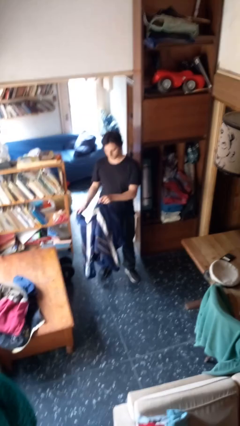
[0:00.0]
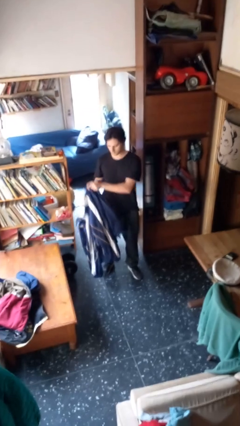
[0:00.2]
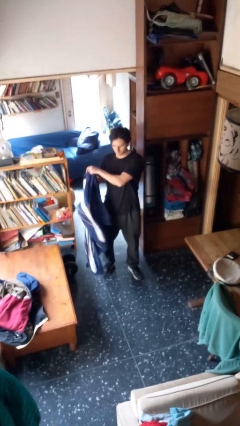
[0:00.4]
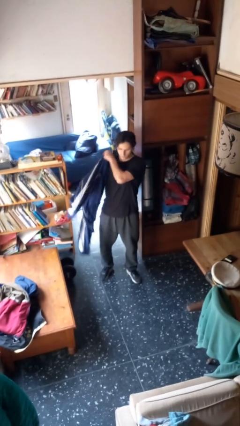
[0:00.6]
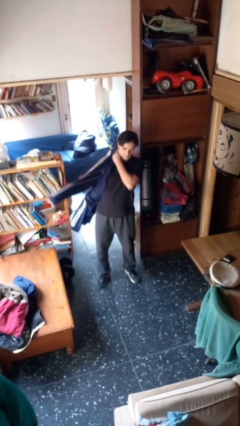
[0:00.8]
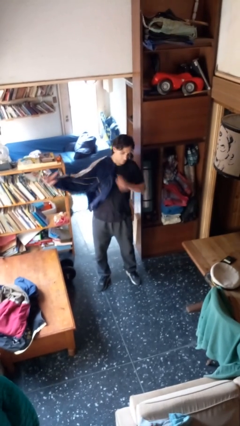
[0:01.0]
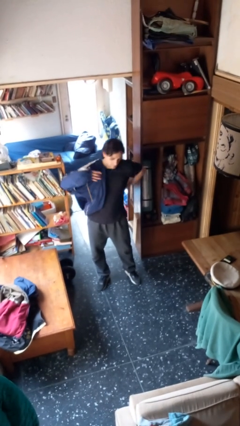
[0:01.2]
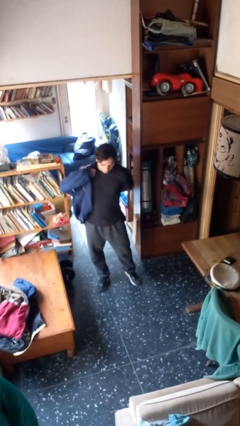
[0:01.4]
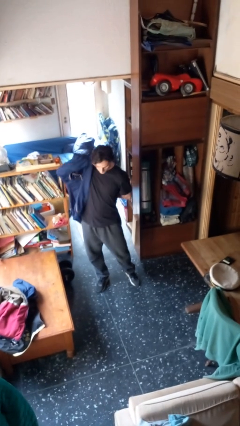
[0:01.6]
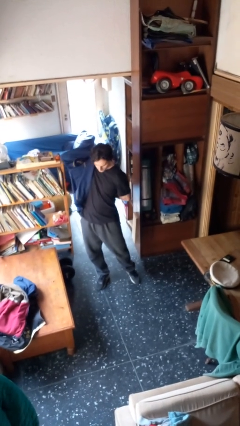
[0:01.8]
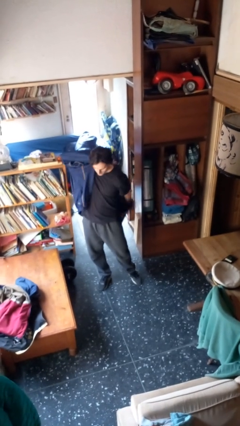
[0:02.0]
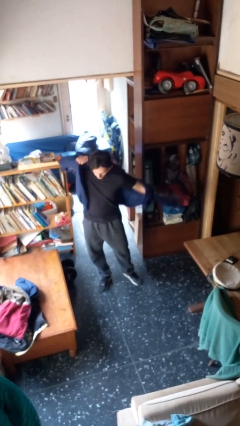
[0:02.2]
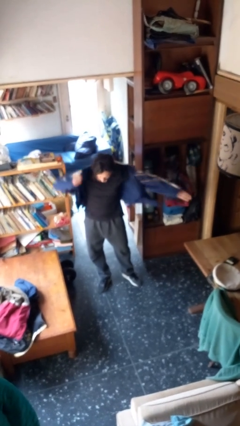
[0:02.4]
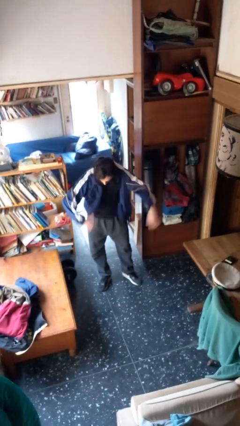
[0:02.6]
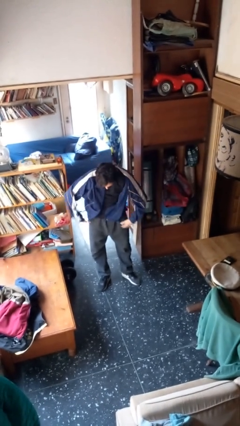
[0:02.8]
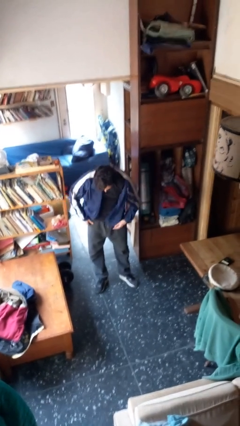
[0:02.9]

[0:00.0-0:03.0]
person puts on jacket

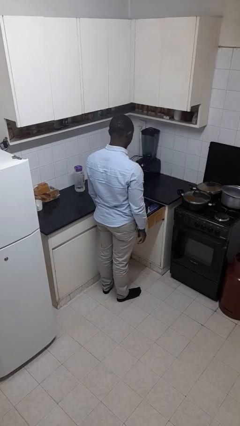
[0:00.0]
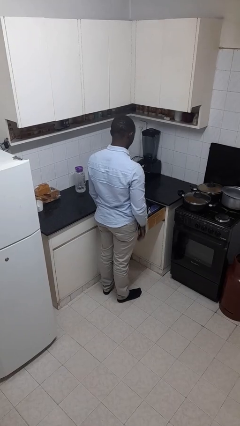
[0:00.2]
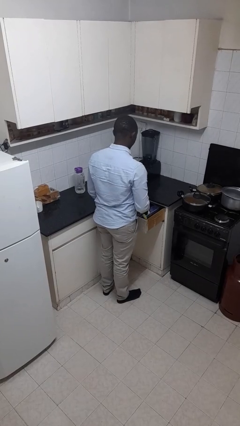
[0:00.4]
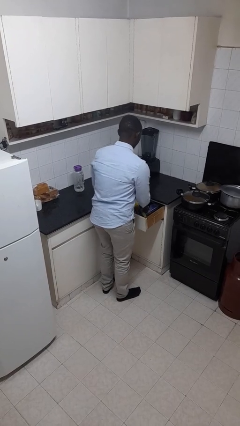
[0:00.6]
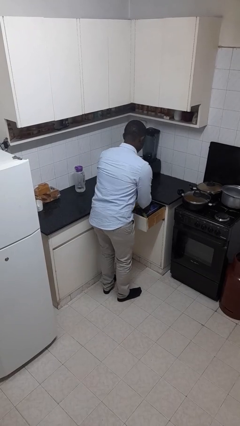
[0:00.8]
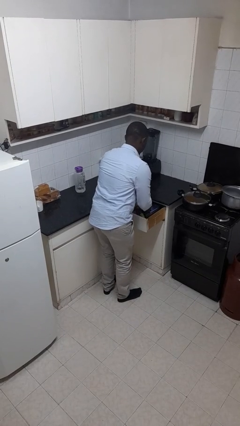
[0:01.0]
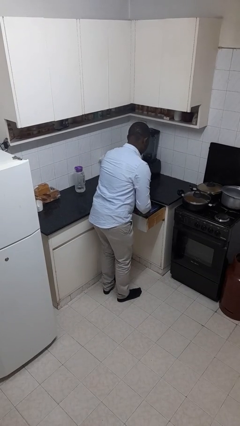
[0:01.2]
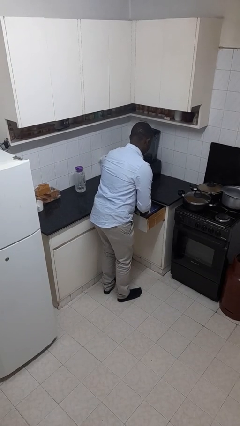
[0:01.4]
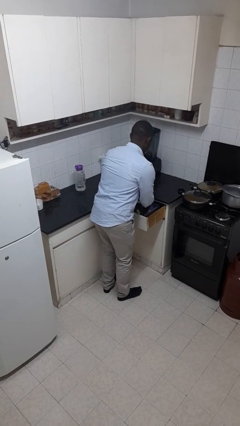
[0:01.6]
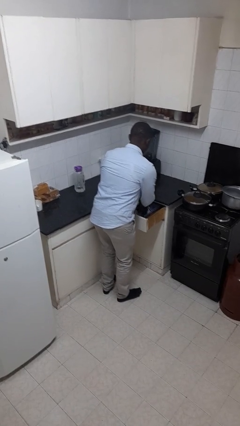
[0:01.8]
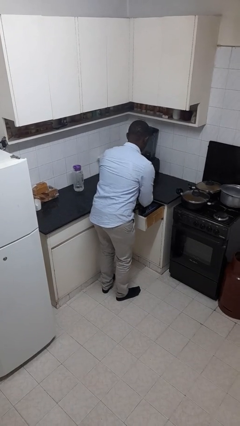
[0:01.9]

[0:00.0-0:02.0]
person searches in kitchen drawer

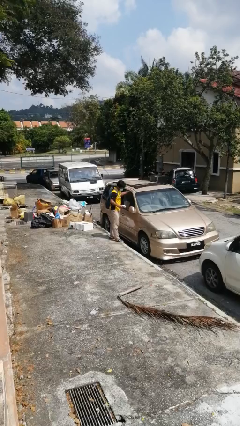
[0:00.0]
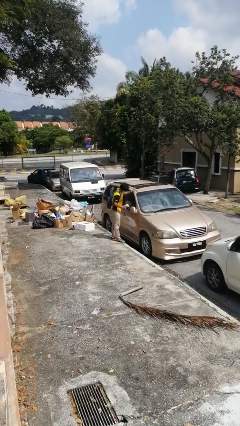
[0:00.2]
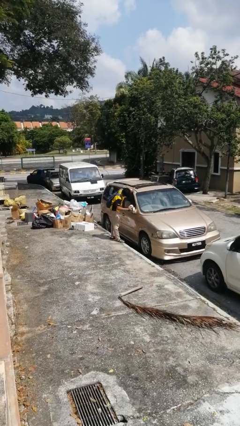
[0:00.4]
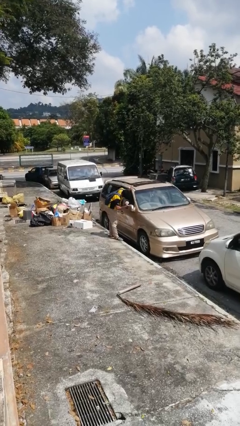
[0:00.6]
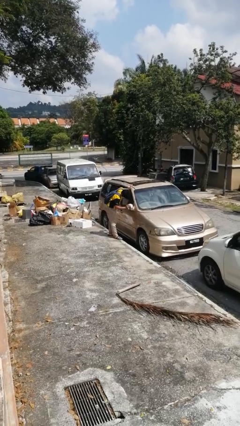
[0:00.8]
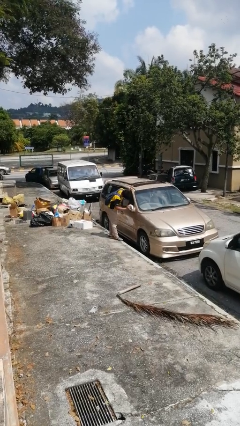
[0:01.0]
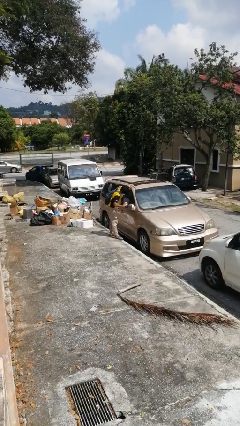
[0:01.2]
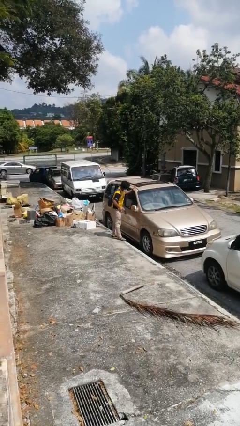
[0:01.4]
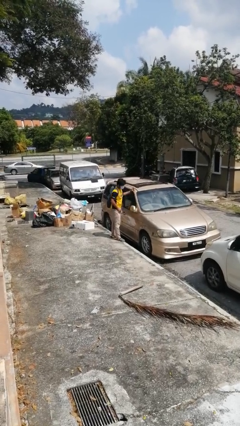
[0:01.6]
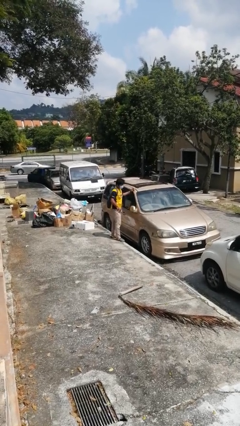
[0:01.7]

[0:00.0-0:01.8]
person polishes car with rag

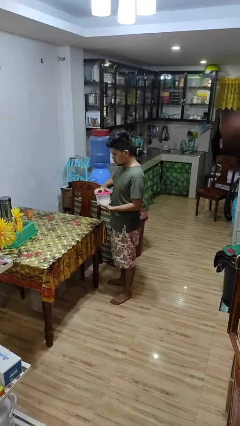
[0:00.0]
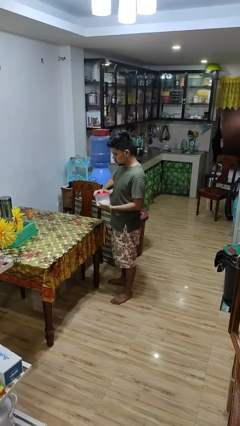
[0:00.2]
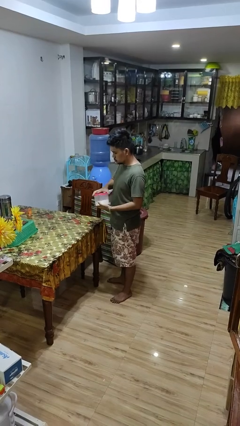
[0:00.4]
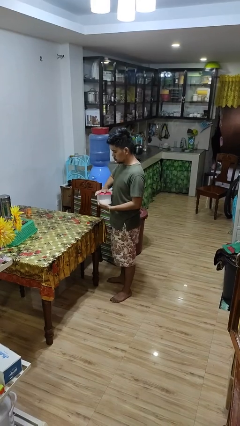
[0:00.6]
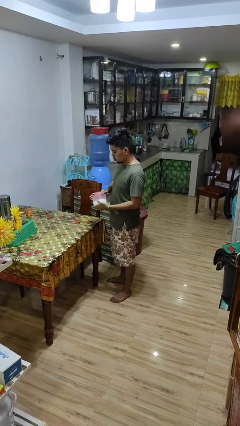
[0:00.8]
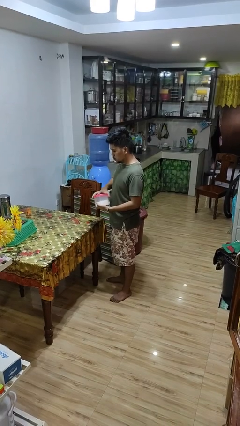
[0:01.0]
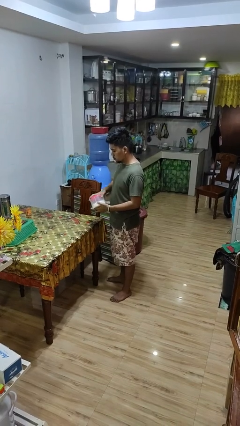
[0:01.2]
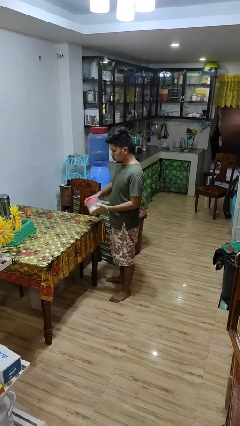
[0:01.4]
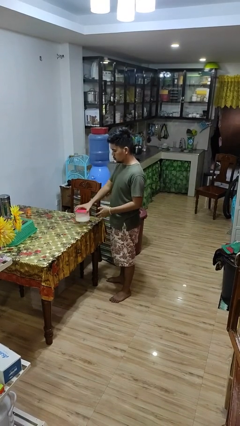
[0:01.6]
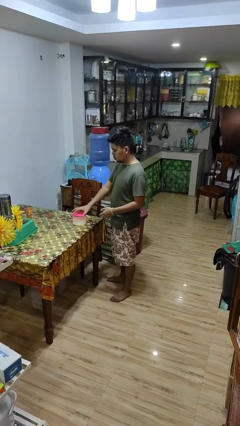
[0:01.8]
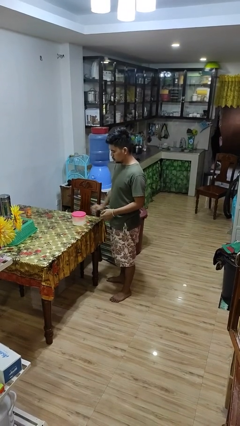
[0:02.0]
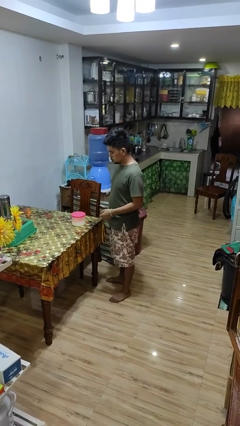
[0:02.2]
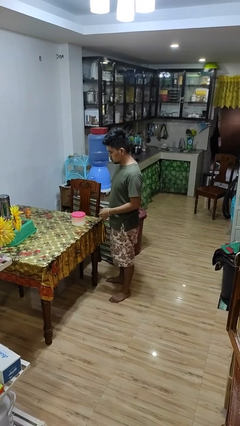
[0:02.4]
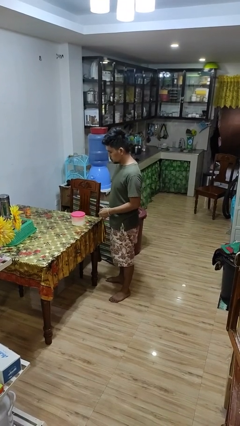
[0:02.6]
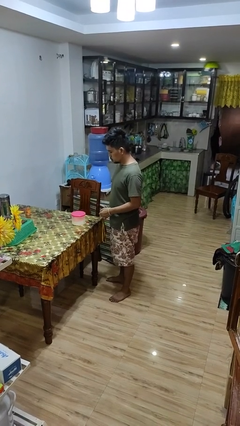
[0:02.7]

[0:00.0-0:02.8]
person closes jar

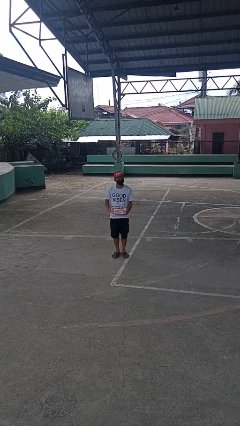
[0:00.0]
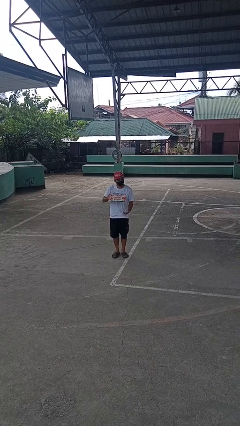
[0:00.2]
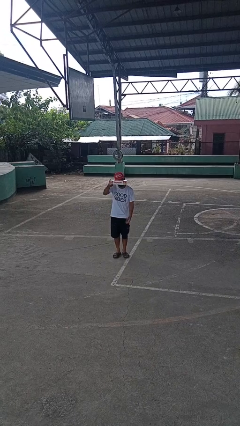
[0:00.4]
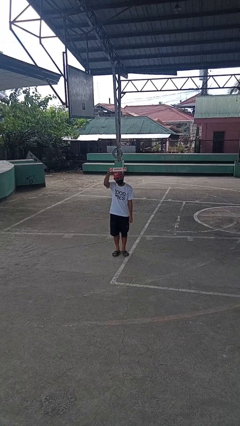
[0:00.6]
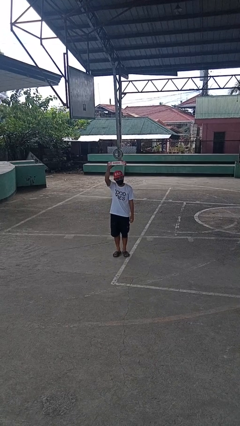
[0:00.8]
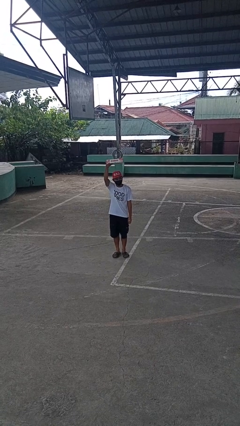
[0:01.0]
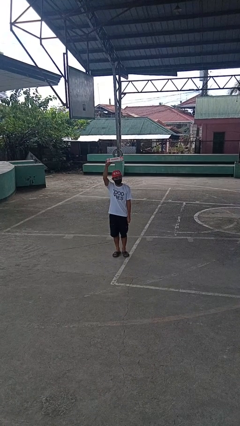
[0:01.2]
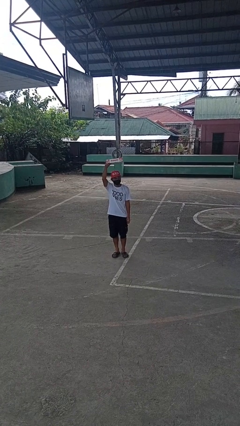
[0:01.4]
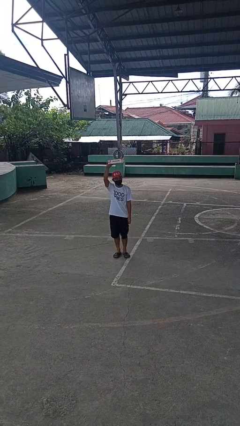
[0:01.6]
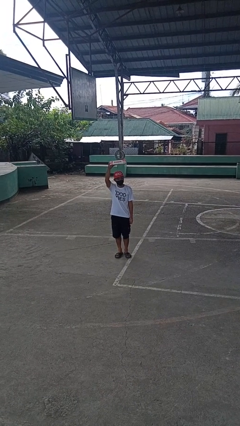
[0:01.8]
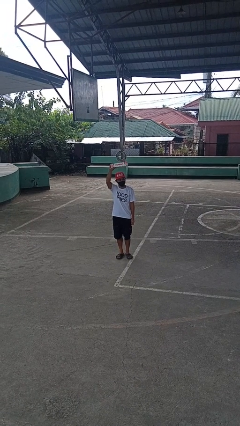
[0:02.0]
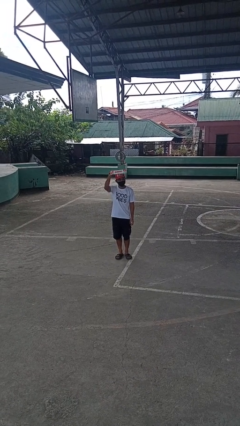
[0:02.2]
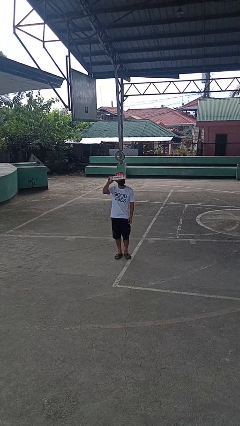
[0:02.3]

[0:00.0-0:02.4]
person holds object above head

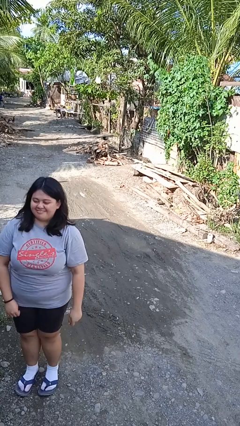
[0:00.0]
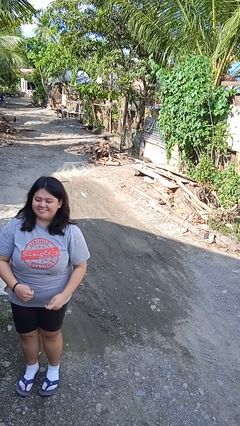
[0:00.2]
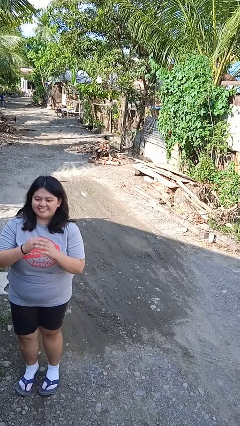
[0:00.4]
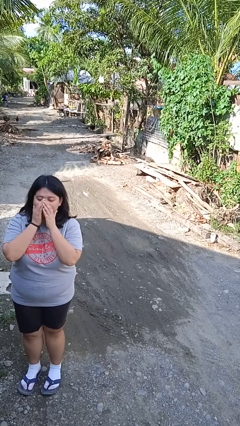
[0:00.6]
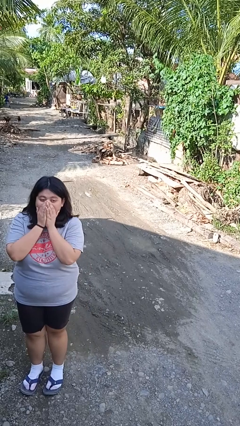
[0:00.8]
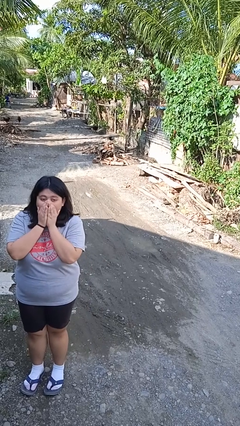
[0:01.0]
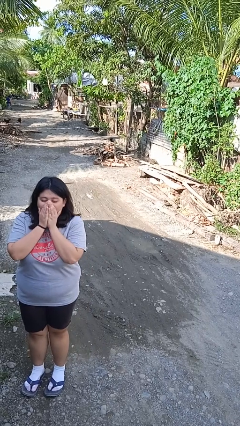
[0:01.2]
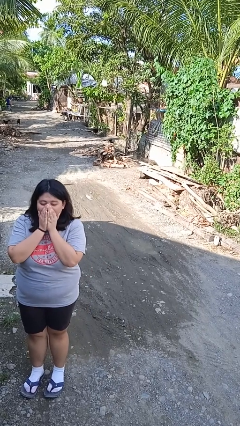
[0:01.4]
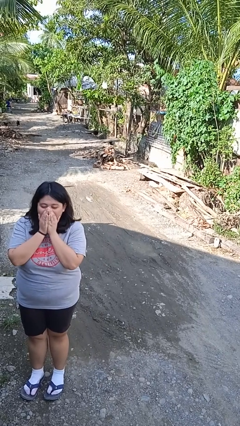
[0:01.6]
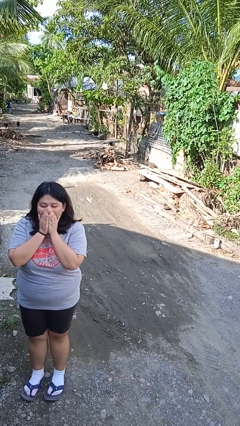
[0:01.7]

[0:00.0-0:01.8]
person blows into hands

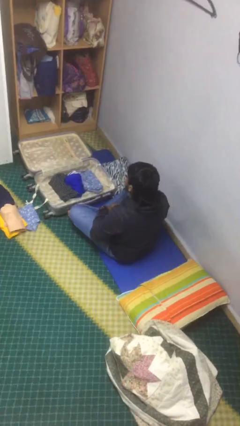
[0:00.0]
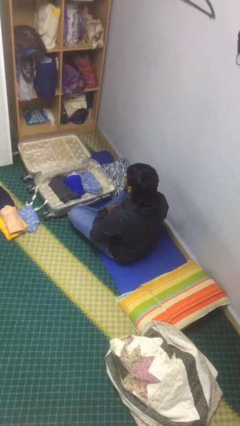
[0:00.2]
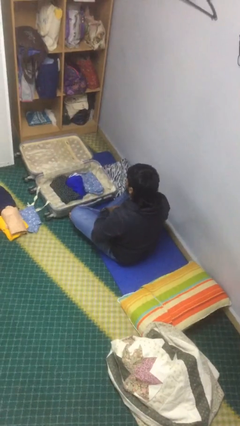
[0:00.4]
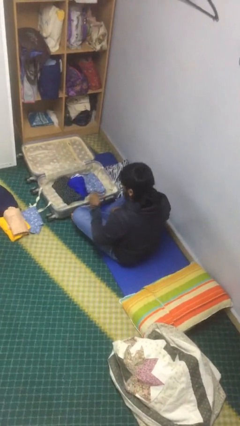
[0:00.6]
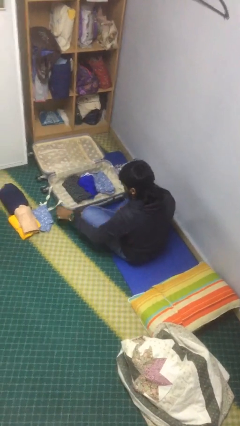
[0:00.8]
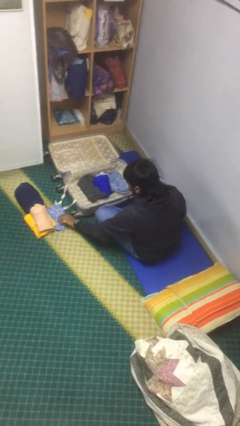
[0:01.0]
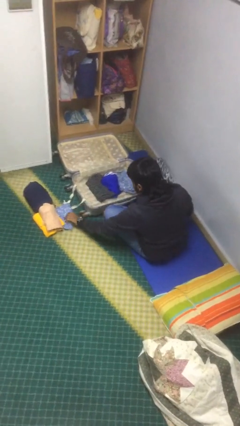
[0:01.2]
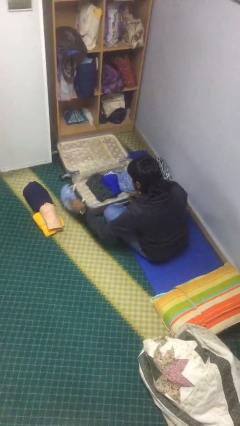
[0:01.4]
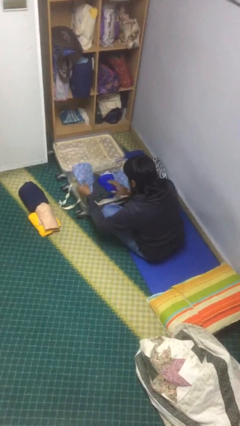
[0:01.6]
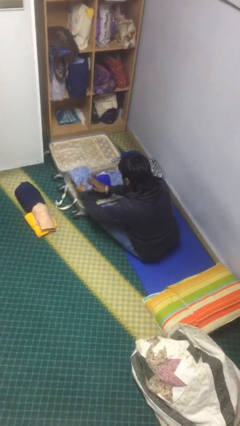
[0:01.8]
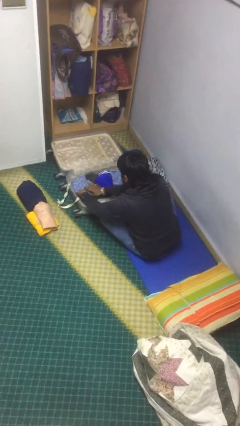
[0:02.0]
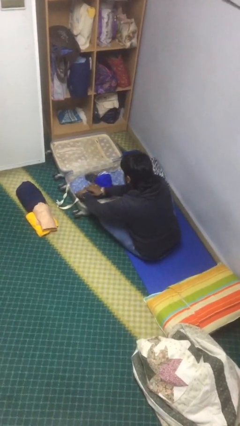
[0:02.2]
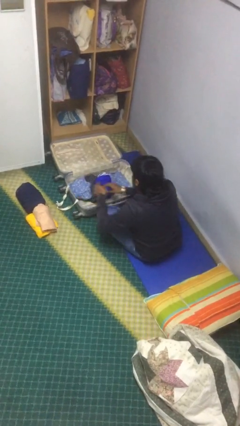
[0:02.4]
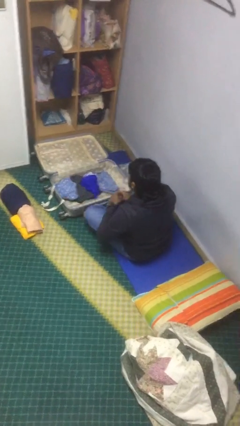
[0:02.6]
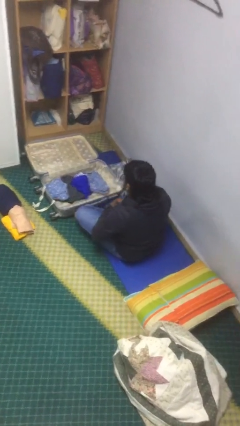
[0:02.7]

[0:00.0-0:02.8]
person loads clothes into suitcase

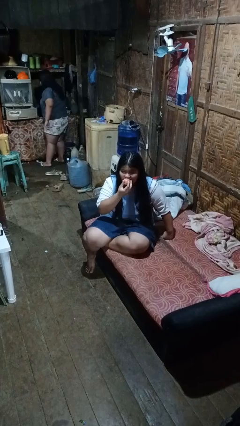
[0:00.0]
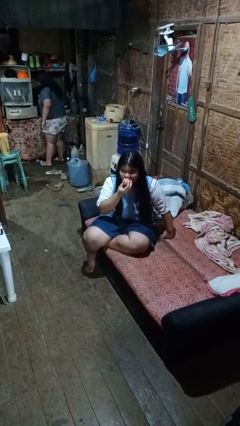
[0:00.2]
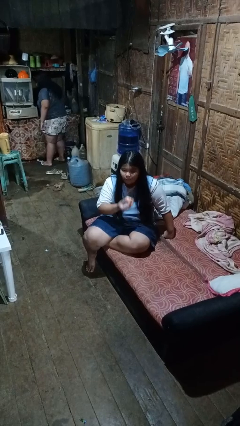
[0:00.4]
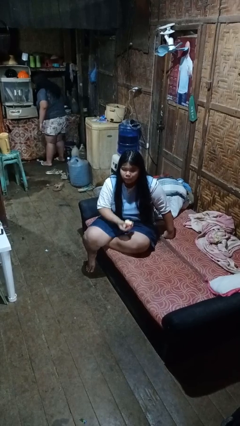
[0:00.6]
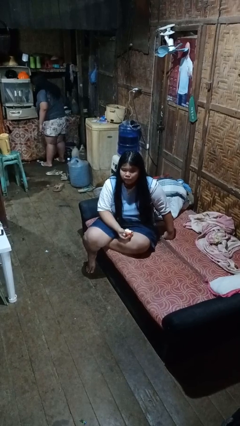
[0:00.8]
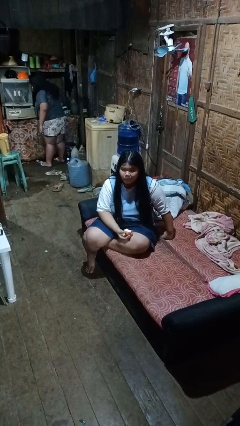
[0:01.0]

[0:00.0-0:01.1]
person eats apple
